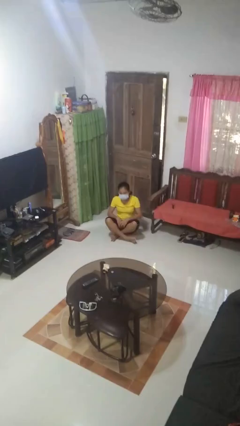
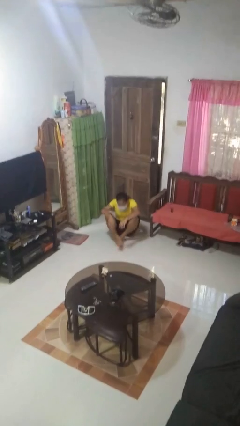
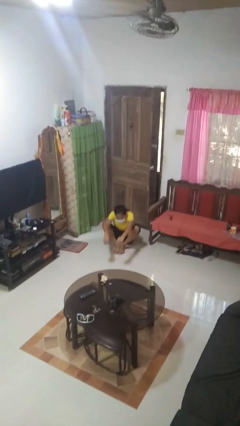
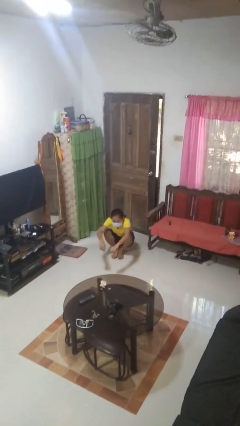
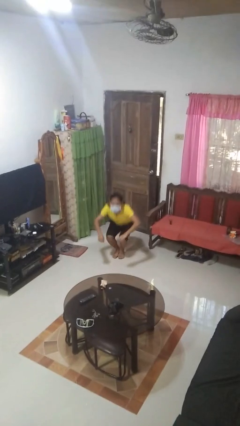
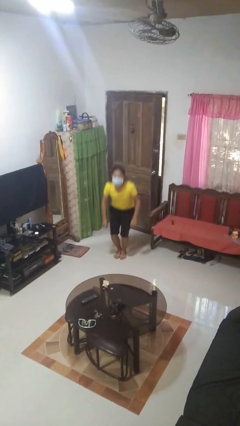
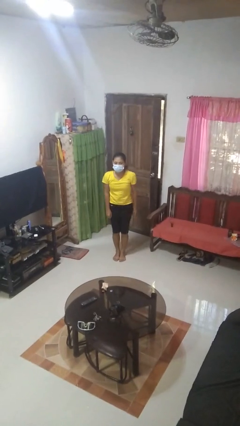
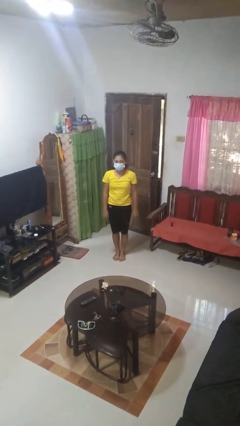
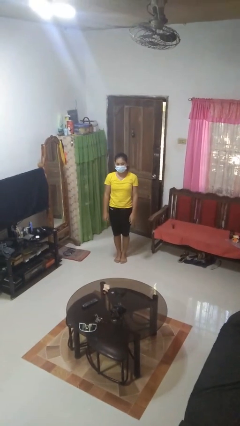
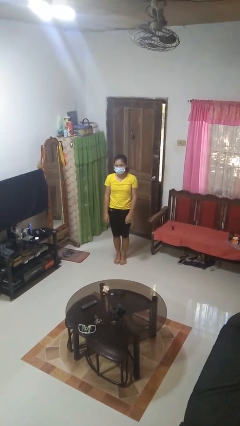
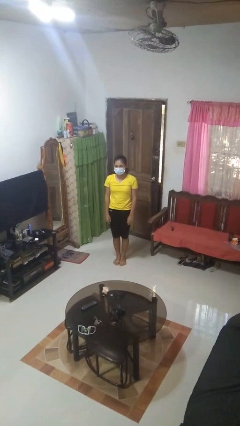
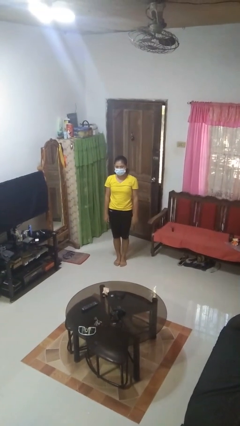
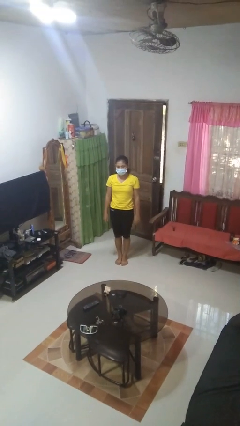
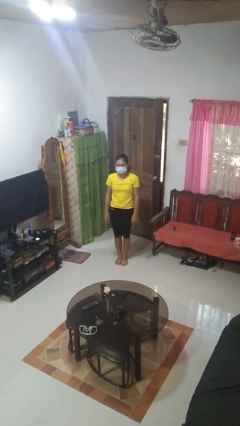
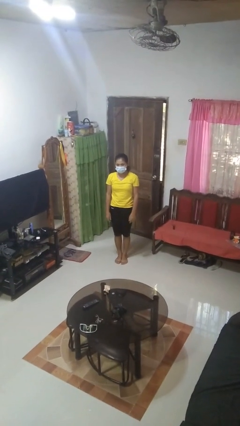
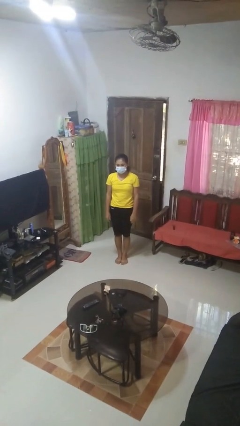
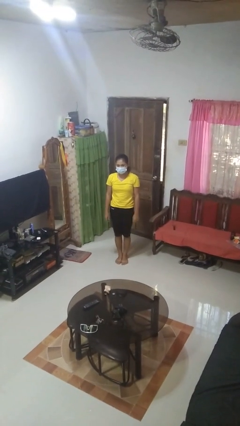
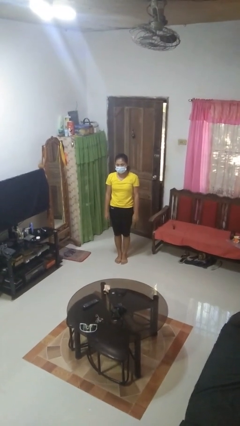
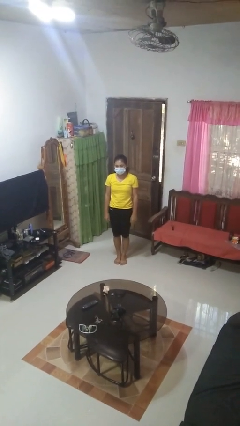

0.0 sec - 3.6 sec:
person stands up from floor

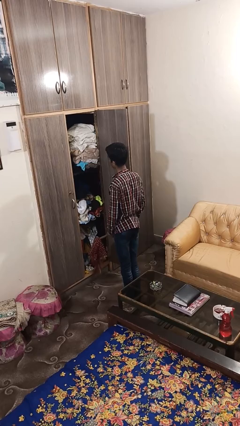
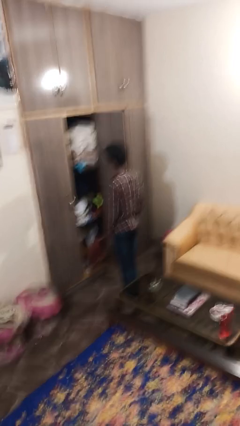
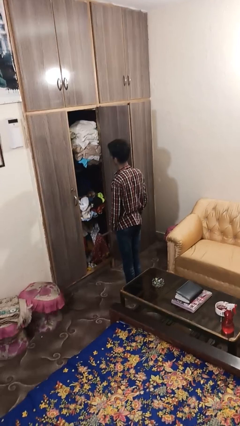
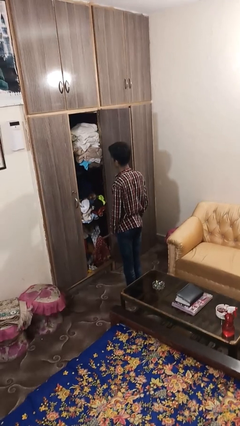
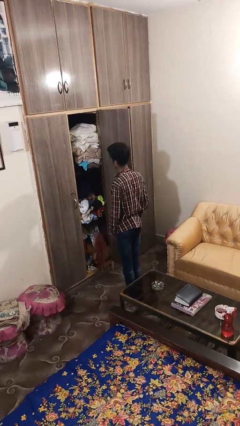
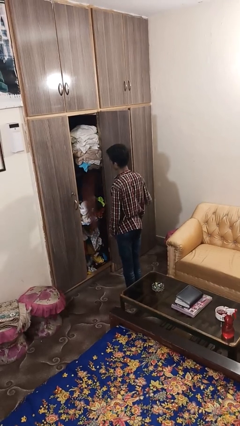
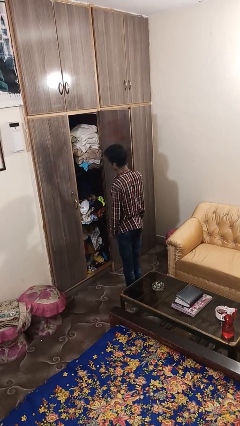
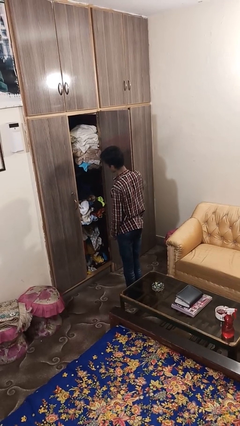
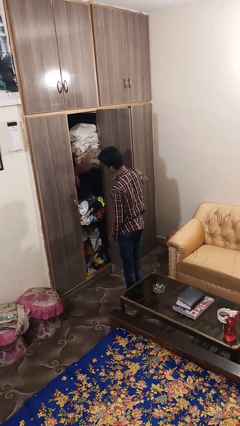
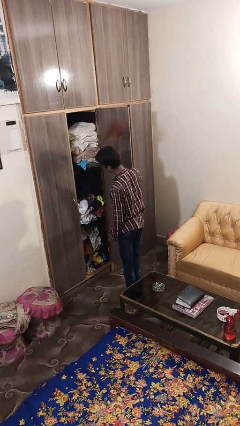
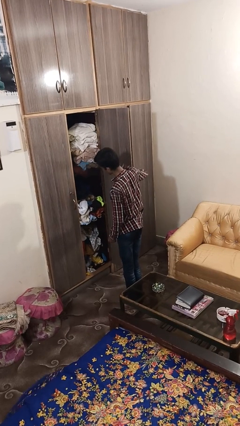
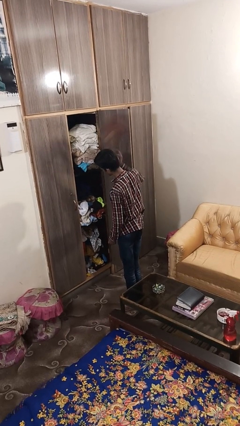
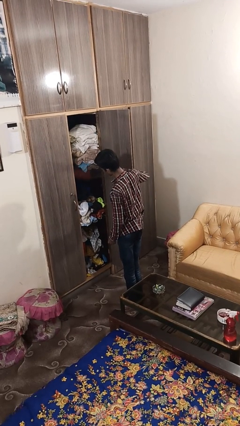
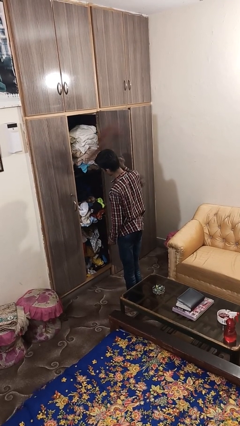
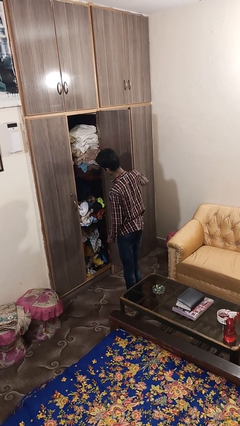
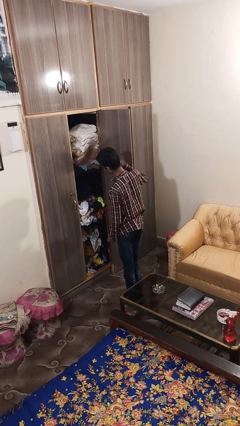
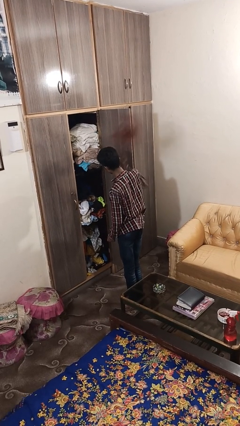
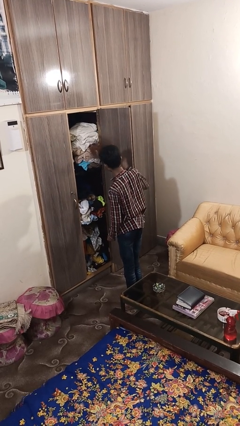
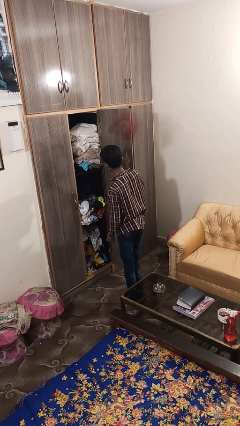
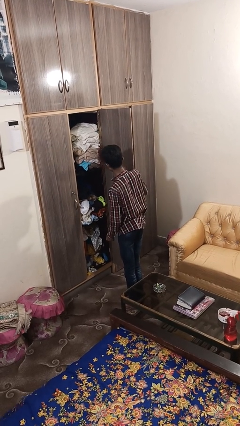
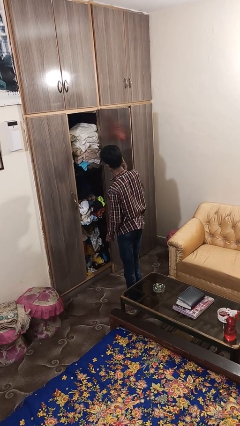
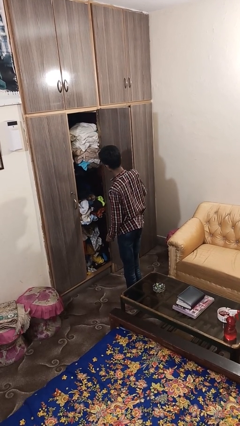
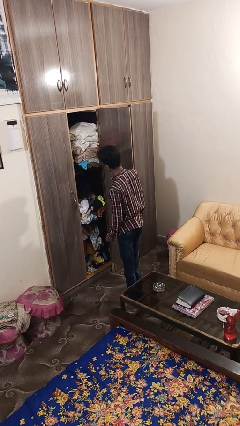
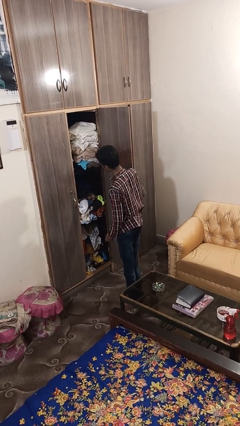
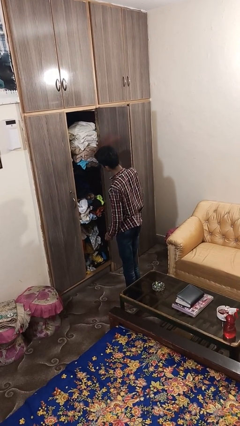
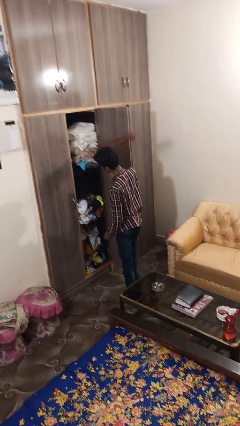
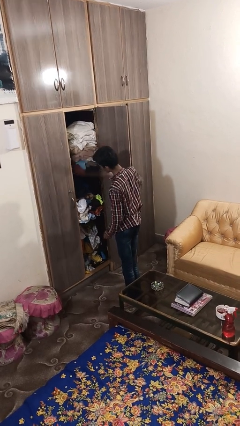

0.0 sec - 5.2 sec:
person dusts furniture

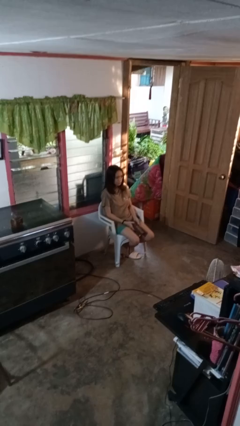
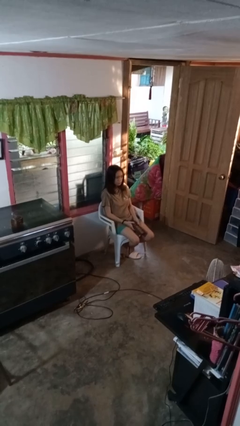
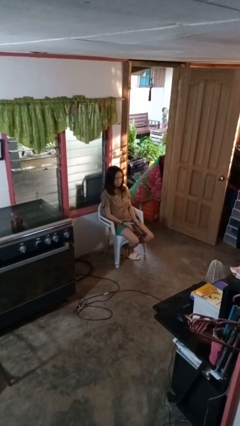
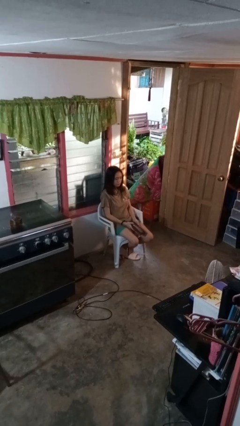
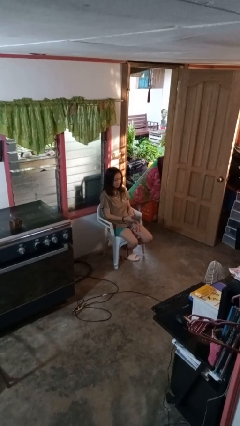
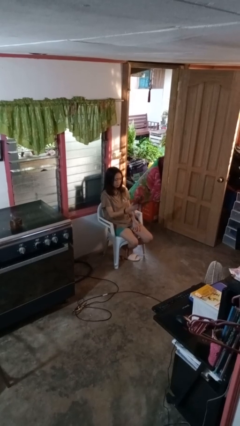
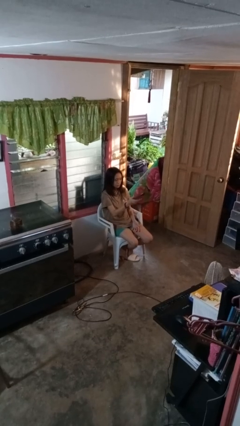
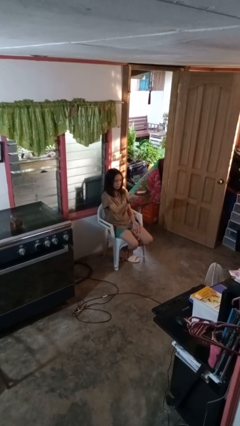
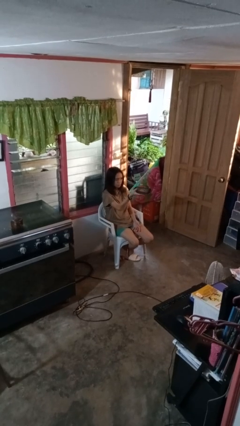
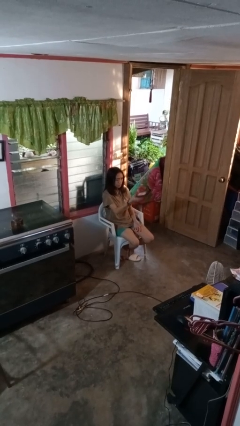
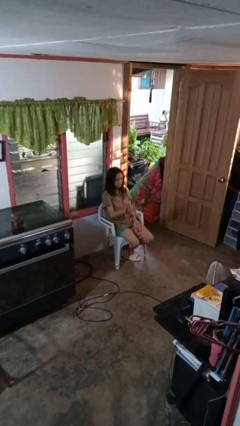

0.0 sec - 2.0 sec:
person uses television remote

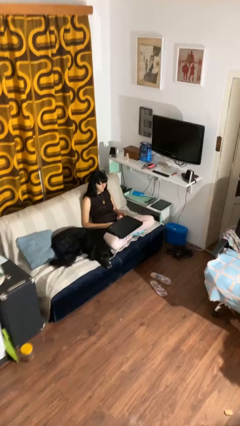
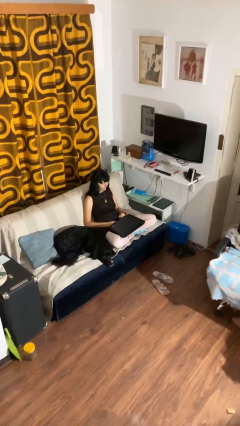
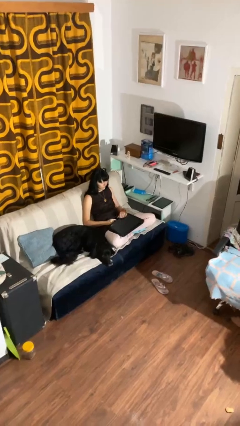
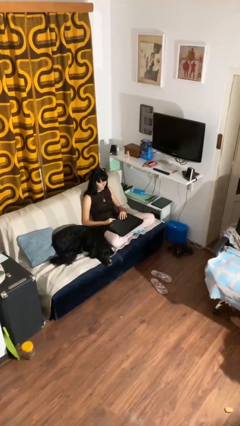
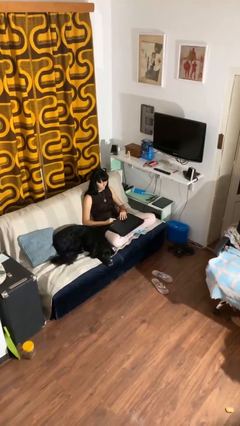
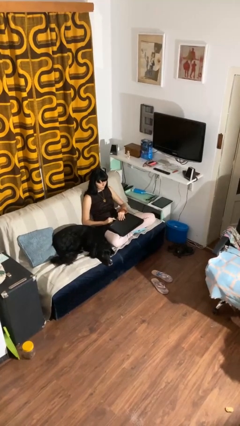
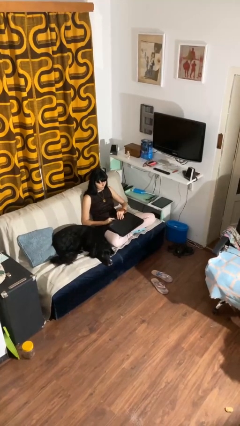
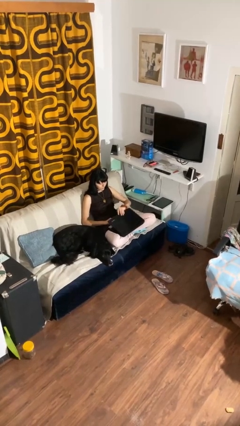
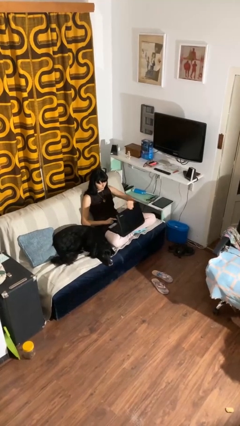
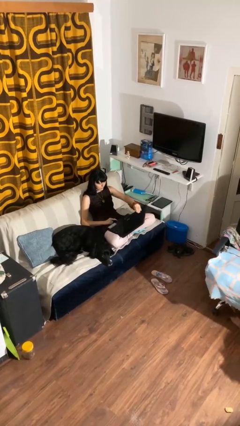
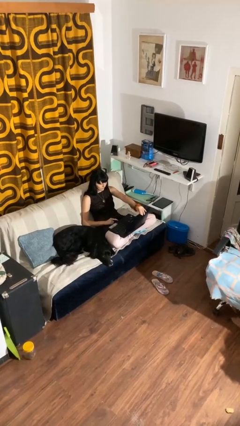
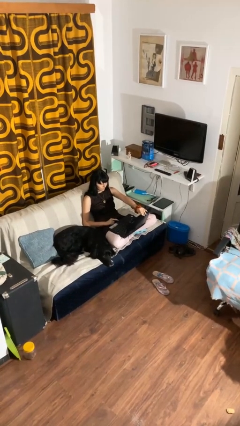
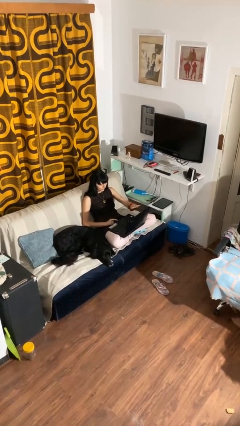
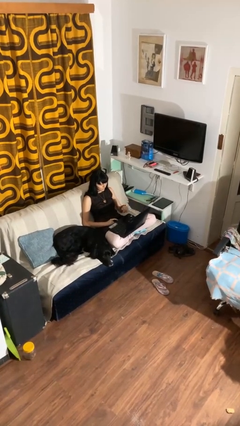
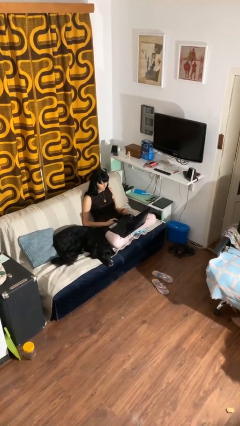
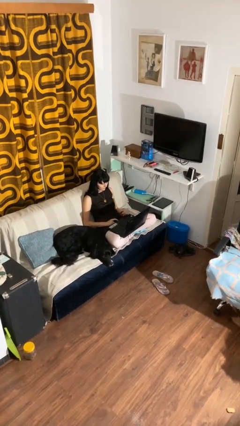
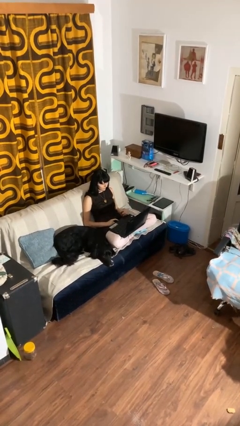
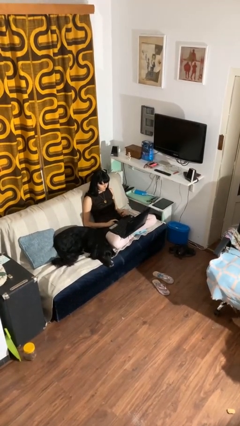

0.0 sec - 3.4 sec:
person opens laptop

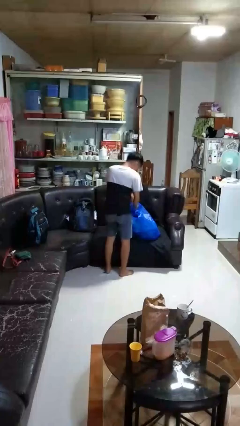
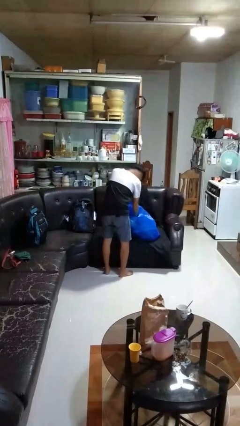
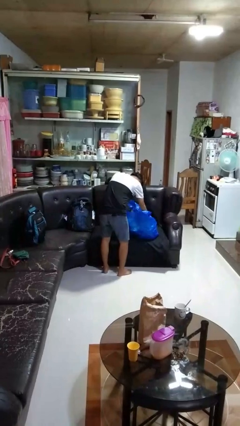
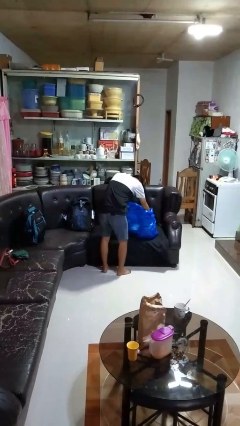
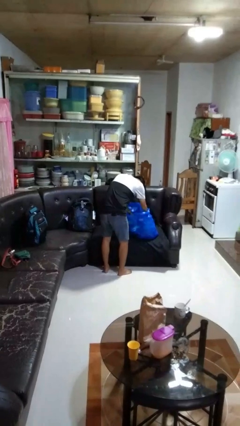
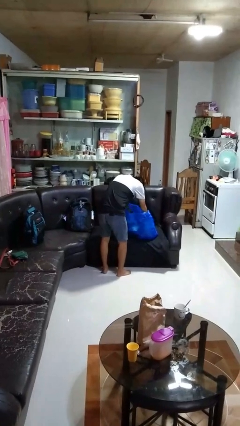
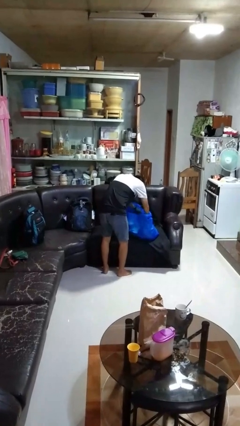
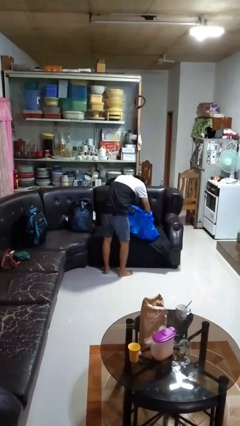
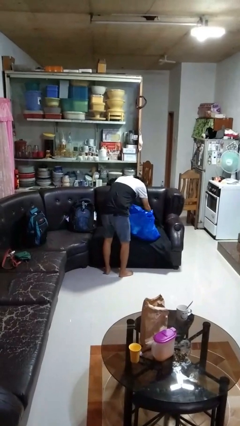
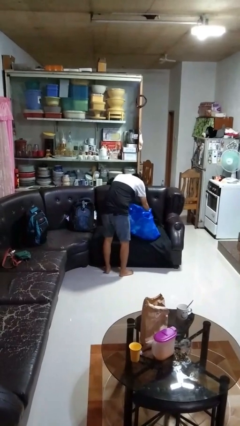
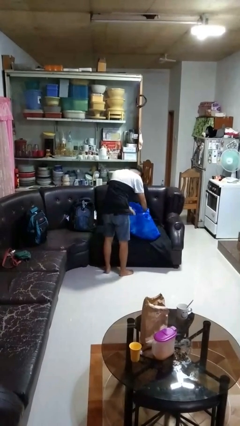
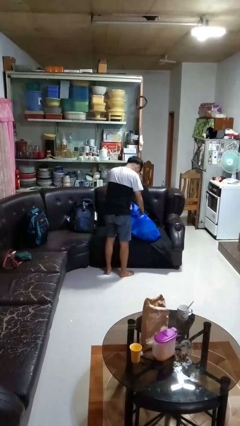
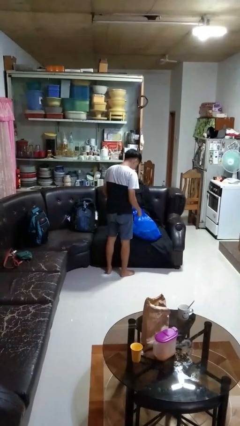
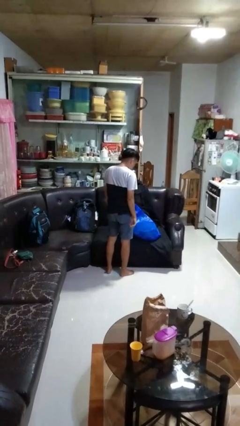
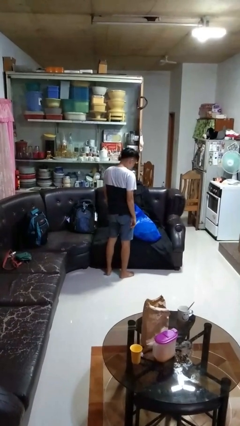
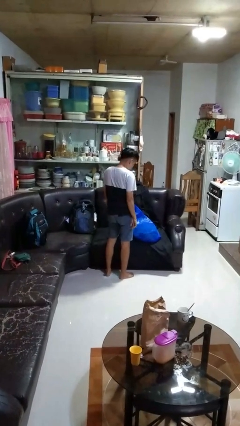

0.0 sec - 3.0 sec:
person searches in bag

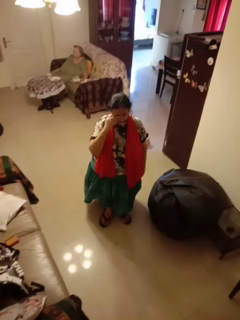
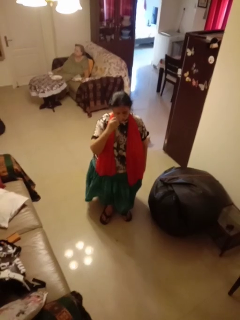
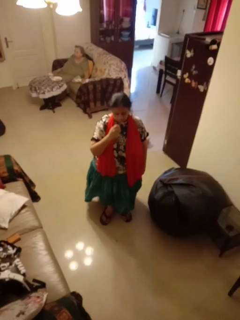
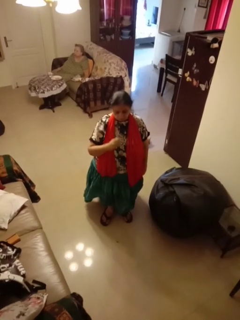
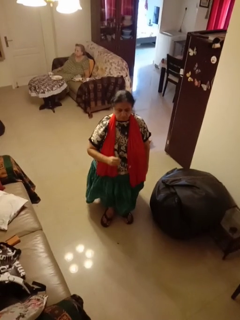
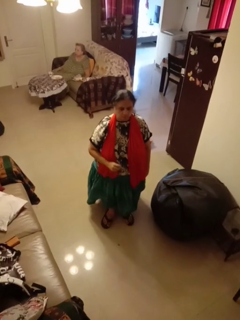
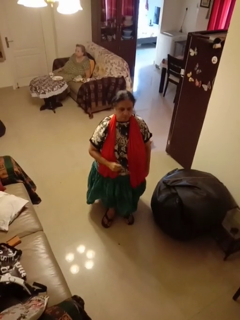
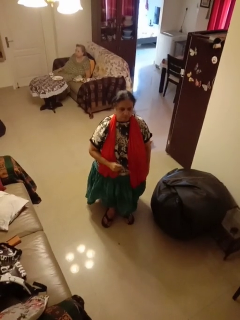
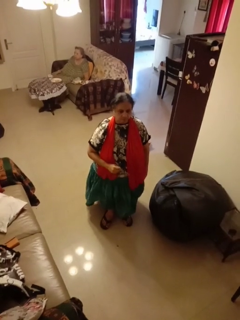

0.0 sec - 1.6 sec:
person takes off glasses
